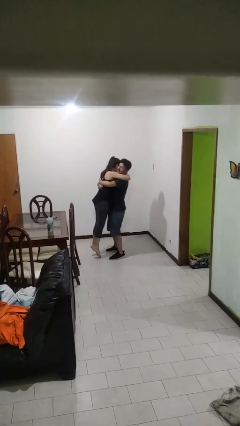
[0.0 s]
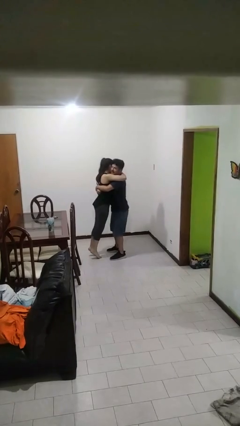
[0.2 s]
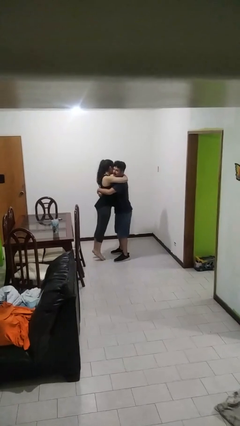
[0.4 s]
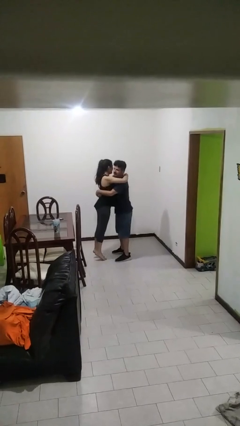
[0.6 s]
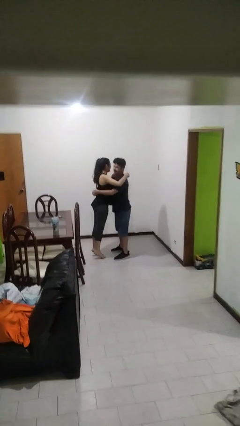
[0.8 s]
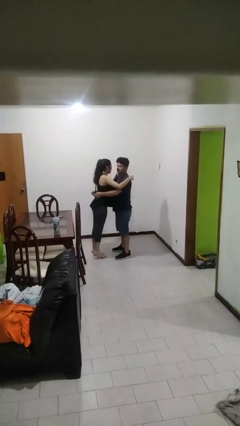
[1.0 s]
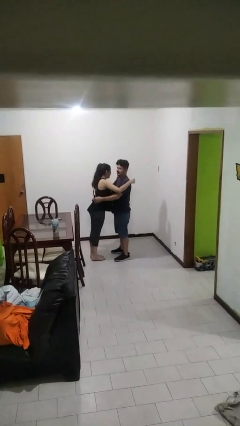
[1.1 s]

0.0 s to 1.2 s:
person puts down person

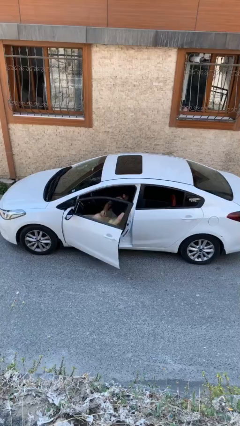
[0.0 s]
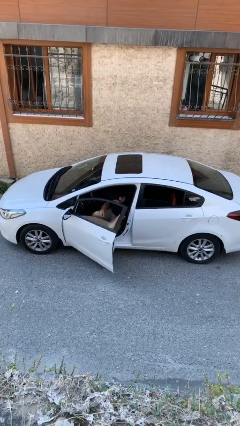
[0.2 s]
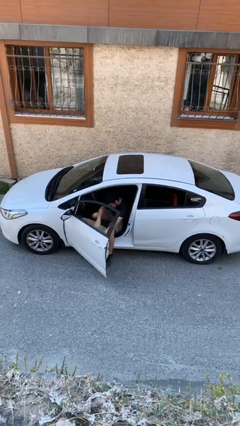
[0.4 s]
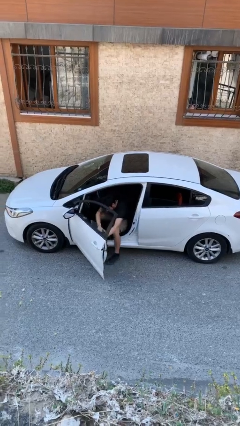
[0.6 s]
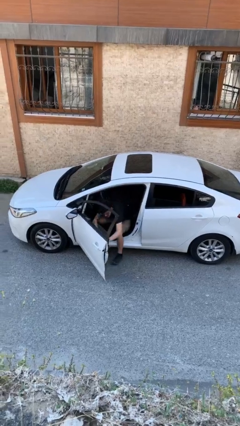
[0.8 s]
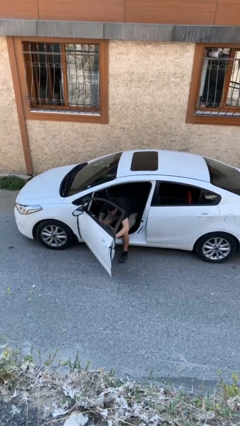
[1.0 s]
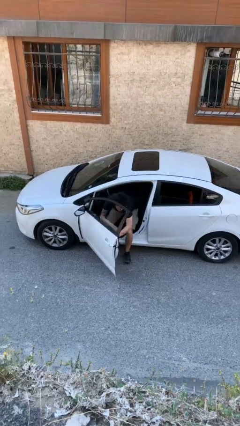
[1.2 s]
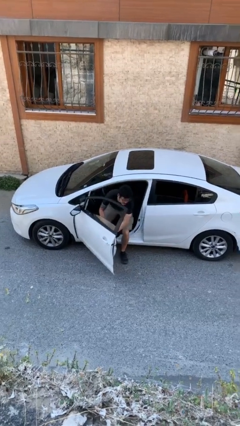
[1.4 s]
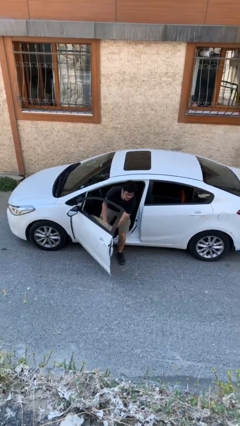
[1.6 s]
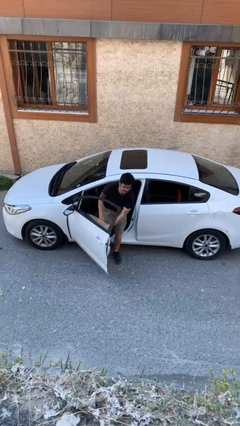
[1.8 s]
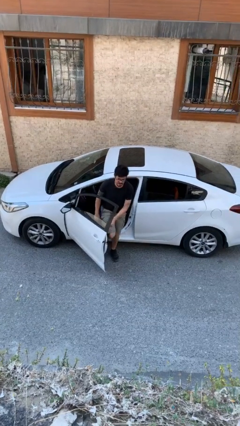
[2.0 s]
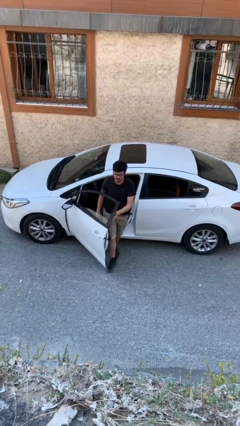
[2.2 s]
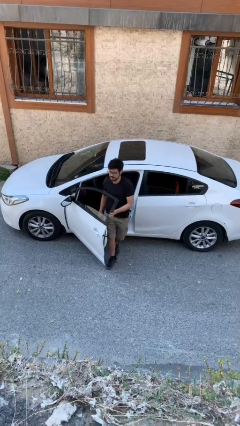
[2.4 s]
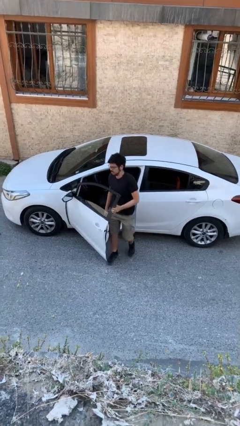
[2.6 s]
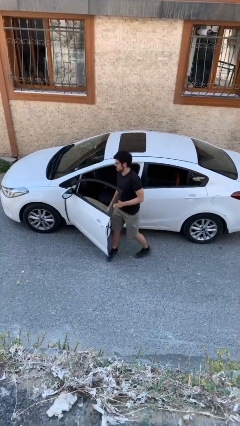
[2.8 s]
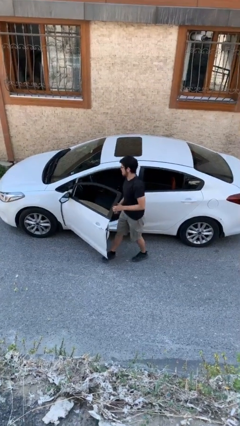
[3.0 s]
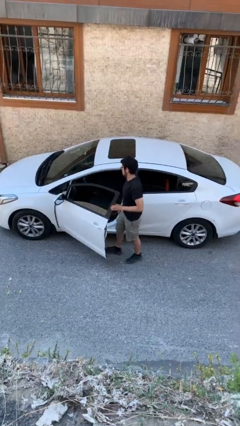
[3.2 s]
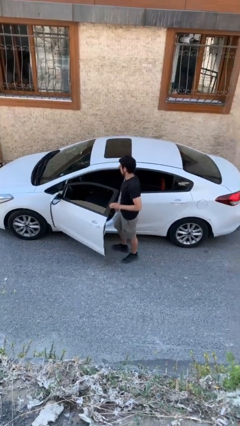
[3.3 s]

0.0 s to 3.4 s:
person exits car

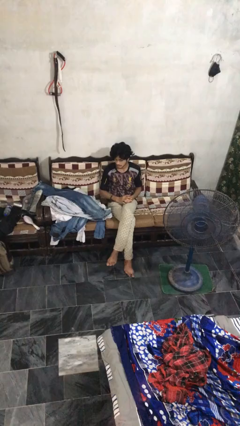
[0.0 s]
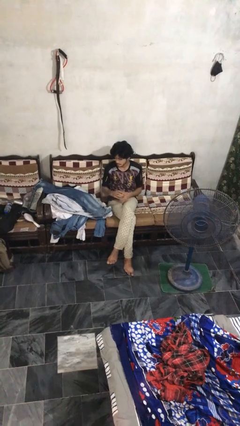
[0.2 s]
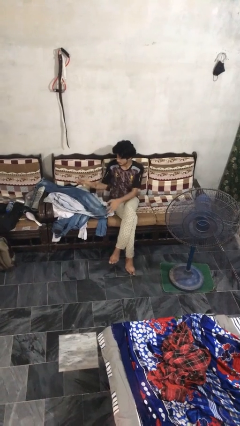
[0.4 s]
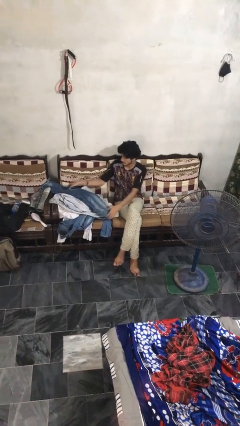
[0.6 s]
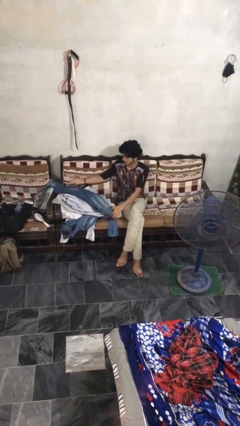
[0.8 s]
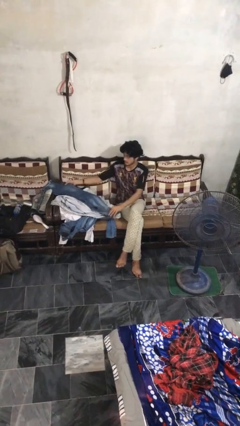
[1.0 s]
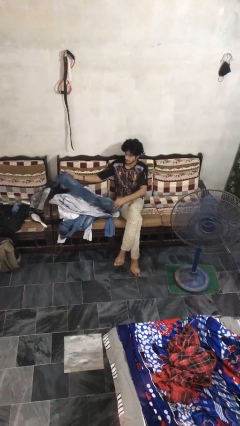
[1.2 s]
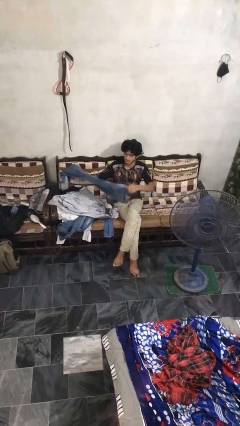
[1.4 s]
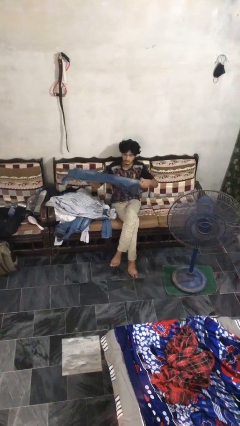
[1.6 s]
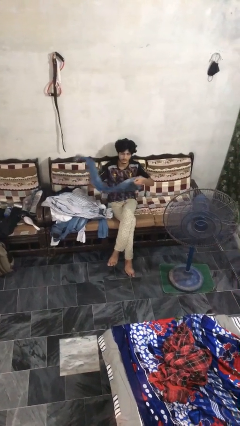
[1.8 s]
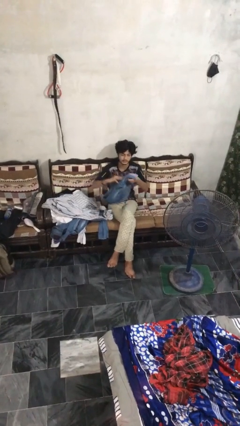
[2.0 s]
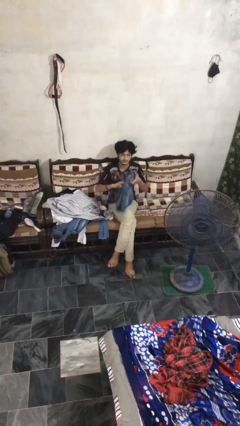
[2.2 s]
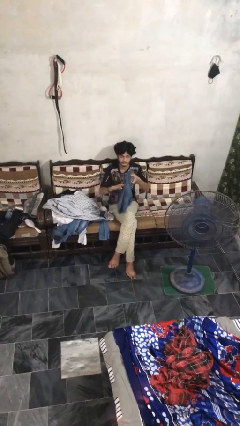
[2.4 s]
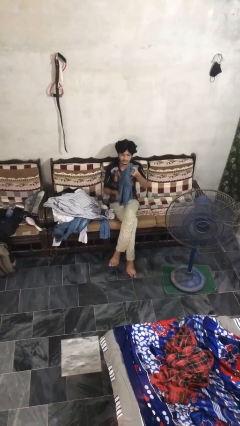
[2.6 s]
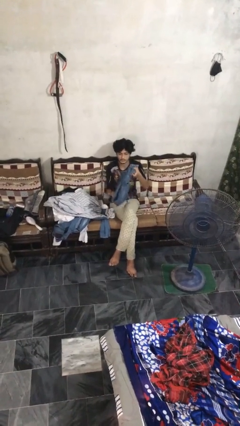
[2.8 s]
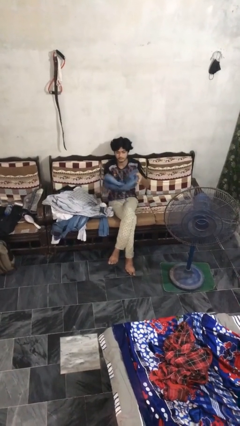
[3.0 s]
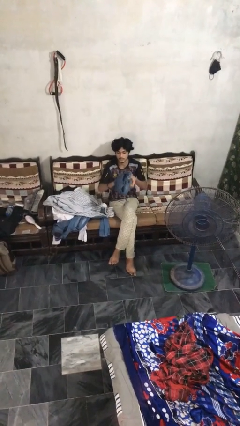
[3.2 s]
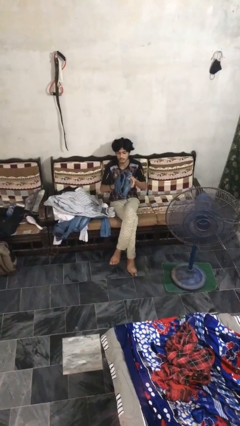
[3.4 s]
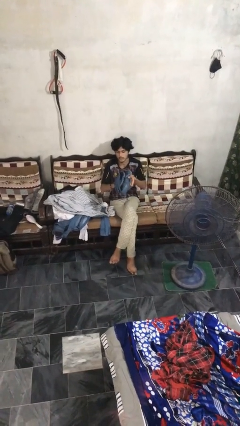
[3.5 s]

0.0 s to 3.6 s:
person folds pants

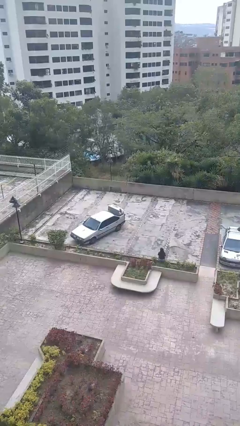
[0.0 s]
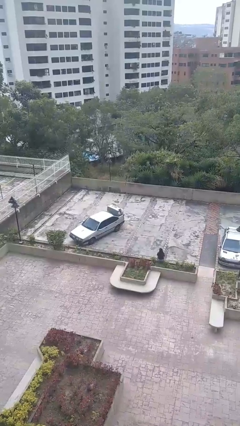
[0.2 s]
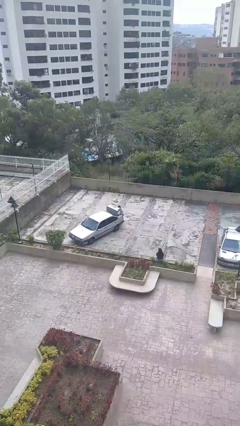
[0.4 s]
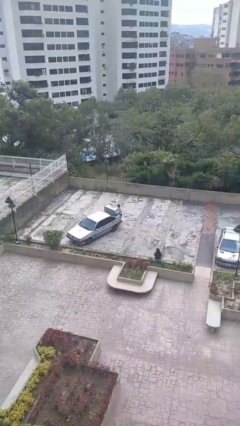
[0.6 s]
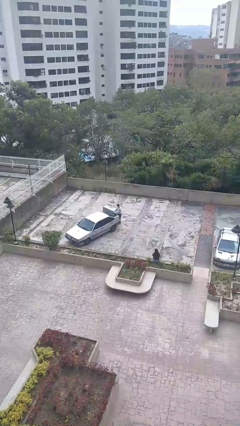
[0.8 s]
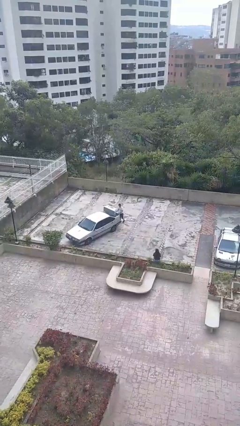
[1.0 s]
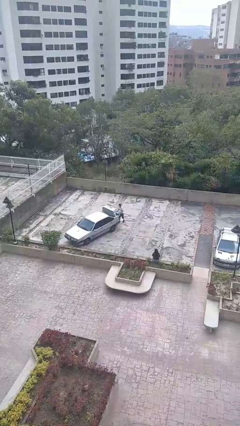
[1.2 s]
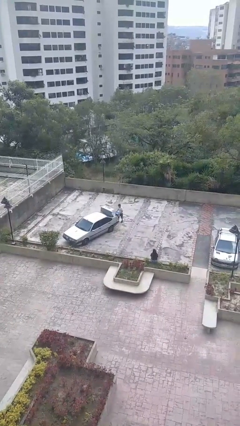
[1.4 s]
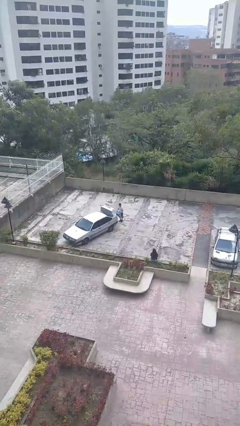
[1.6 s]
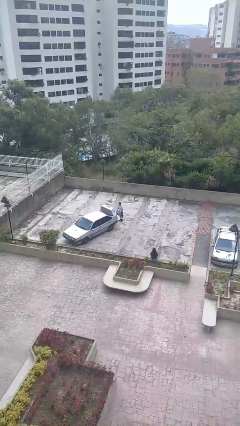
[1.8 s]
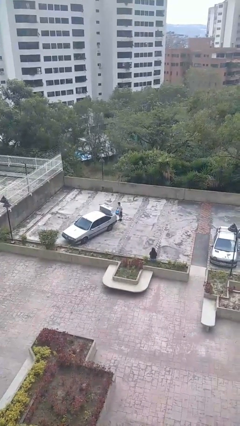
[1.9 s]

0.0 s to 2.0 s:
person unloads car

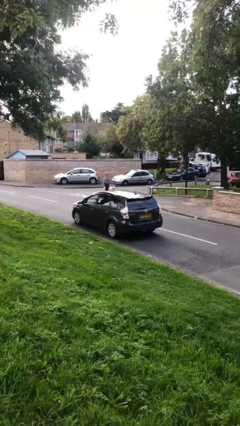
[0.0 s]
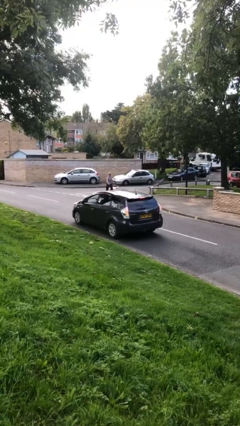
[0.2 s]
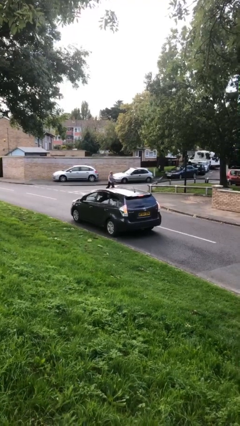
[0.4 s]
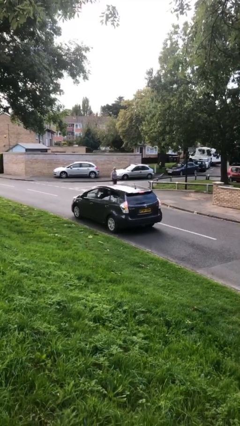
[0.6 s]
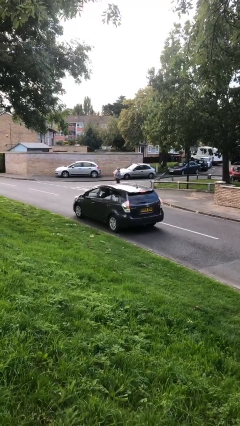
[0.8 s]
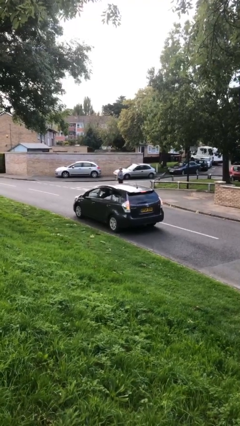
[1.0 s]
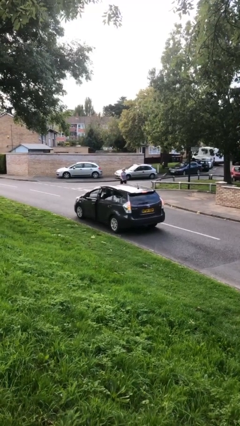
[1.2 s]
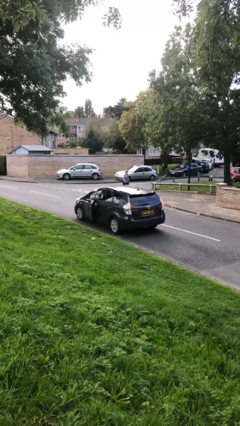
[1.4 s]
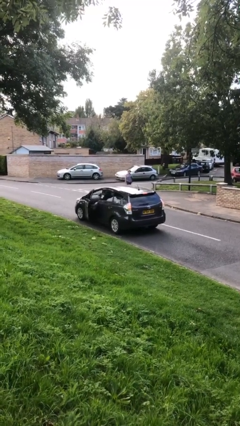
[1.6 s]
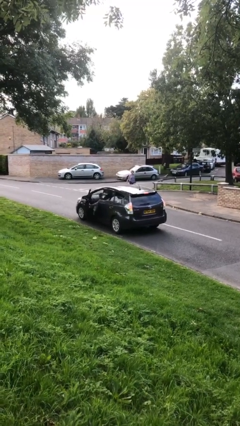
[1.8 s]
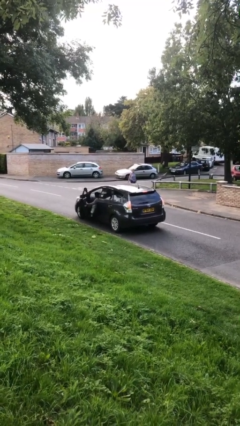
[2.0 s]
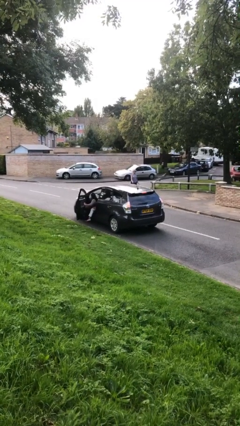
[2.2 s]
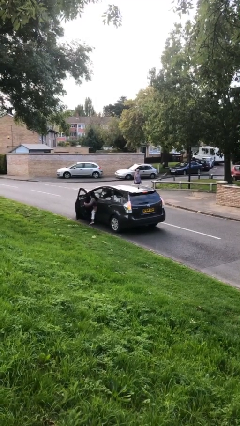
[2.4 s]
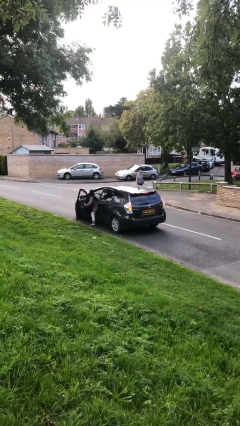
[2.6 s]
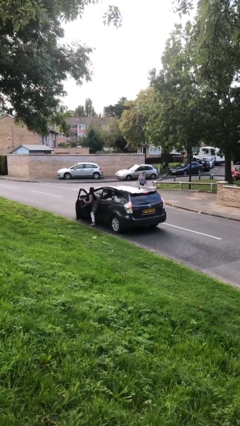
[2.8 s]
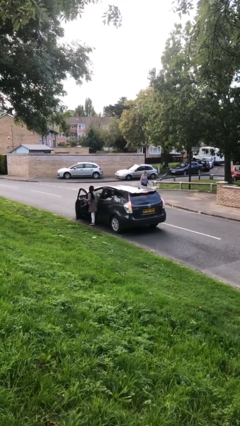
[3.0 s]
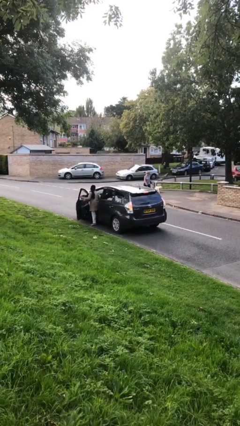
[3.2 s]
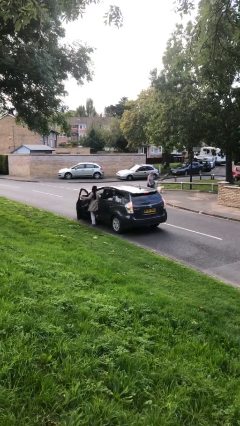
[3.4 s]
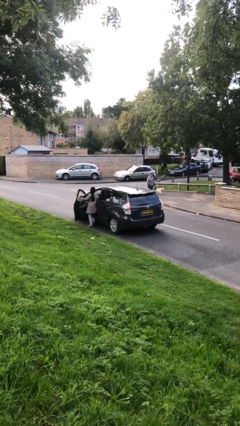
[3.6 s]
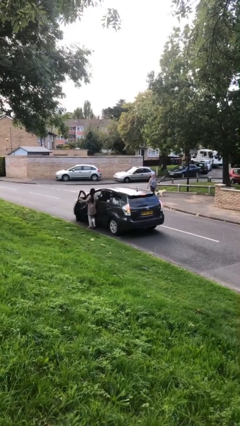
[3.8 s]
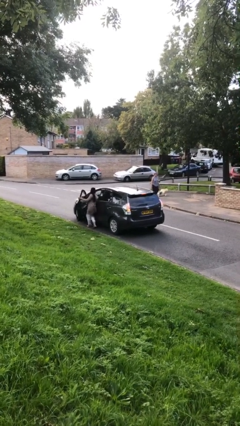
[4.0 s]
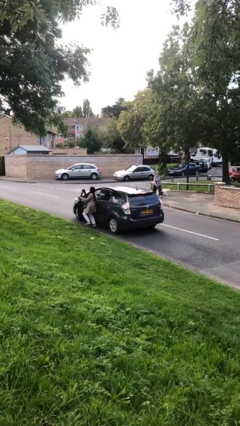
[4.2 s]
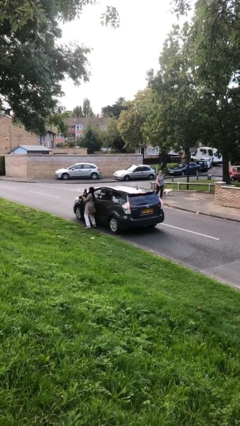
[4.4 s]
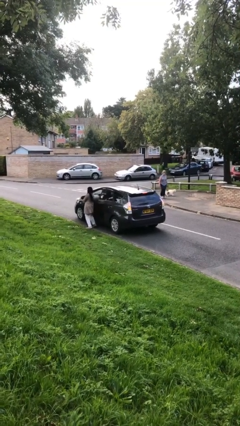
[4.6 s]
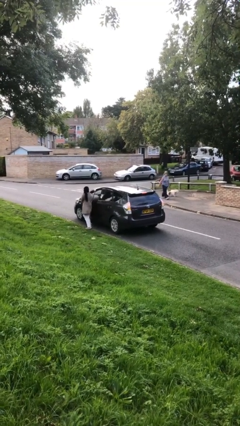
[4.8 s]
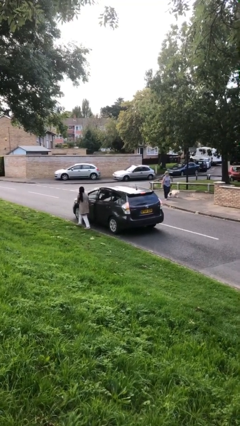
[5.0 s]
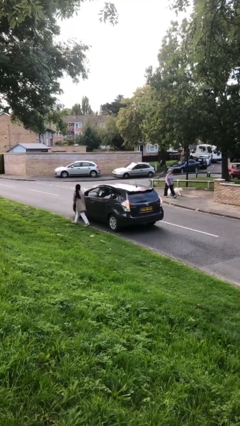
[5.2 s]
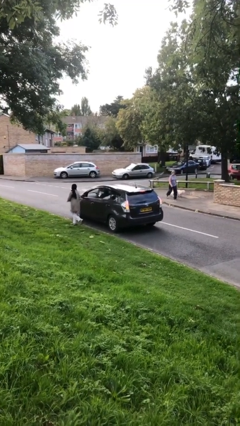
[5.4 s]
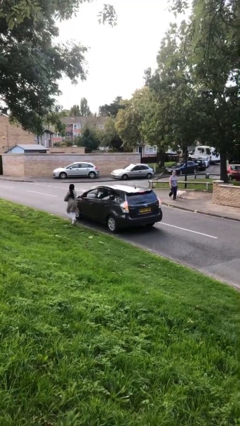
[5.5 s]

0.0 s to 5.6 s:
car drops off person

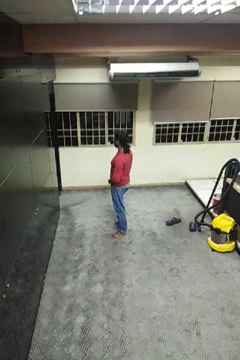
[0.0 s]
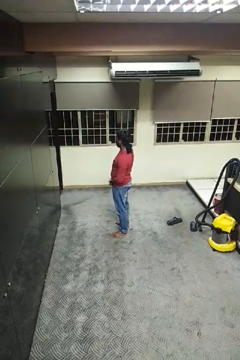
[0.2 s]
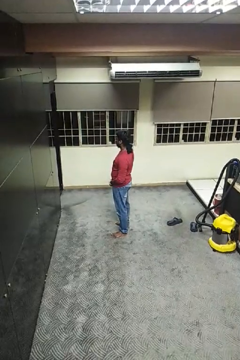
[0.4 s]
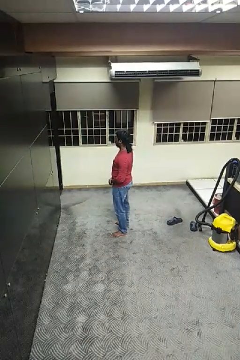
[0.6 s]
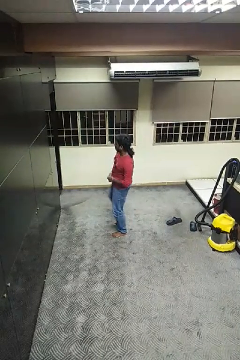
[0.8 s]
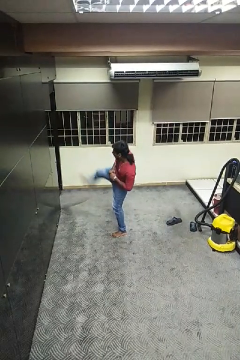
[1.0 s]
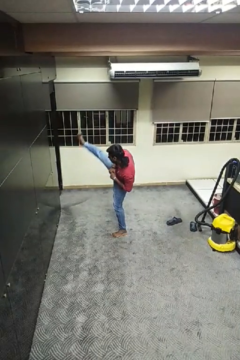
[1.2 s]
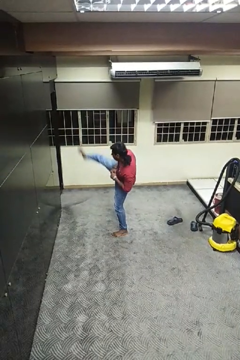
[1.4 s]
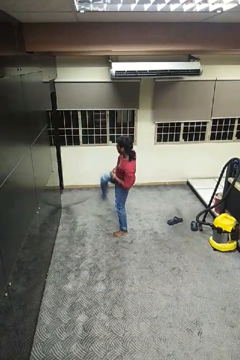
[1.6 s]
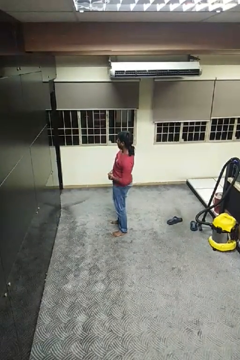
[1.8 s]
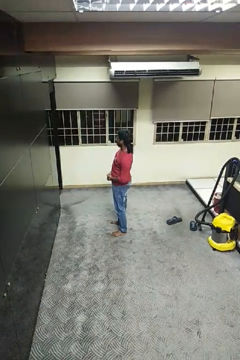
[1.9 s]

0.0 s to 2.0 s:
person karate kicks
